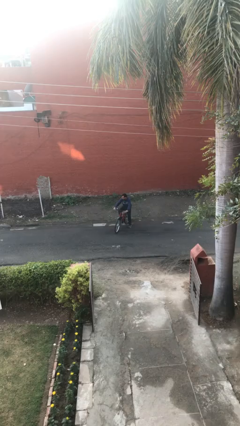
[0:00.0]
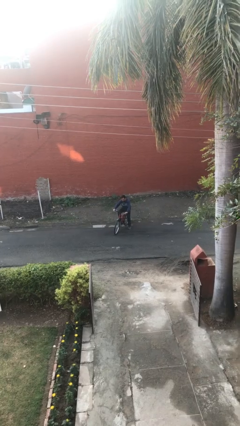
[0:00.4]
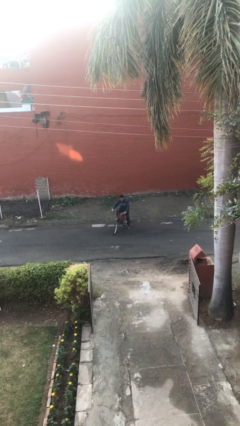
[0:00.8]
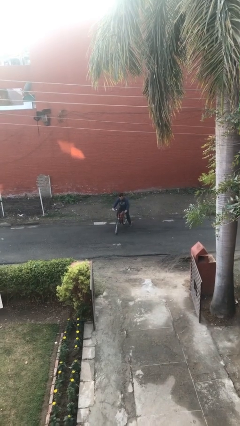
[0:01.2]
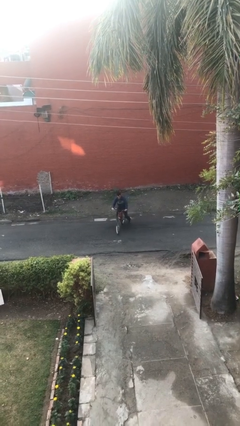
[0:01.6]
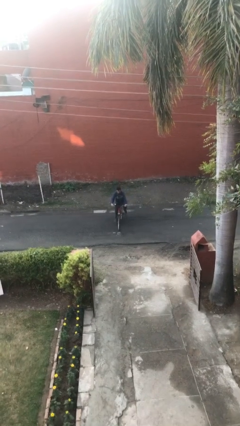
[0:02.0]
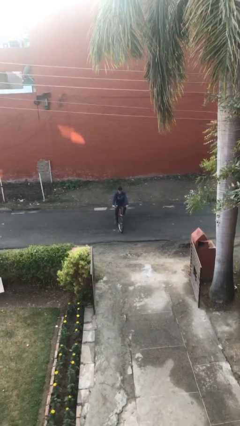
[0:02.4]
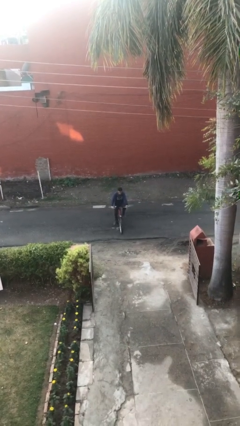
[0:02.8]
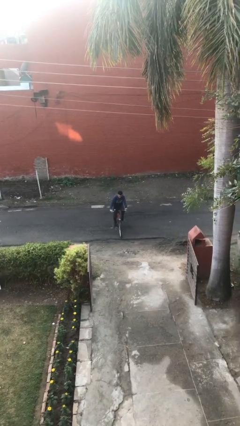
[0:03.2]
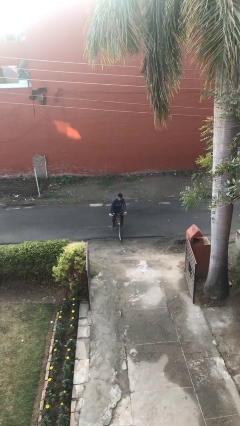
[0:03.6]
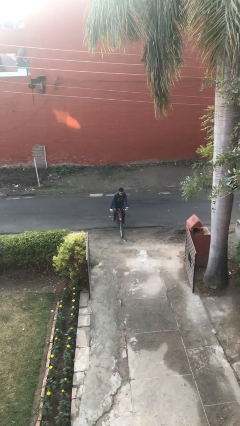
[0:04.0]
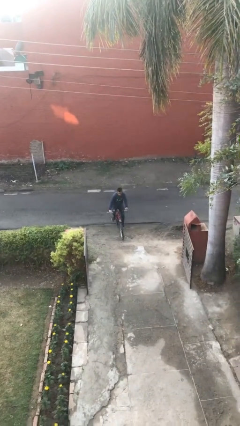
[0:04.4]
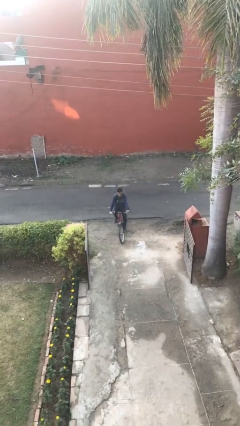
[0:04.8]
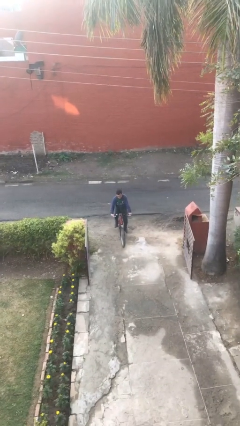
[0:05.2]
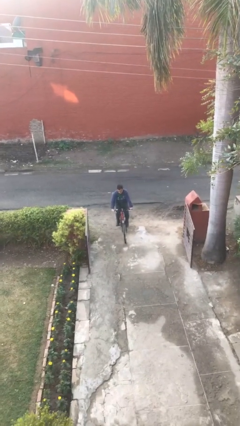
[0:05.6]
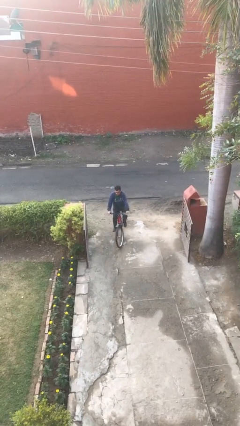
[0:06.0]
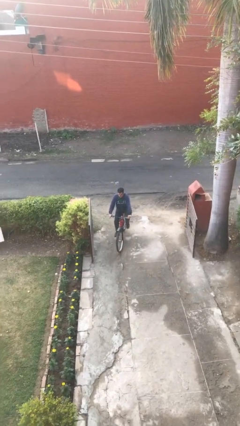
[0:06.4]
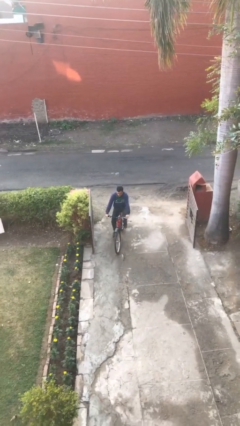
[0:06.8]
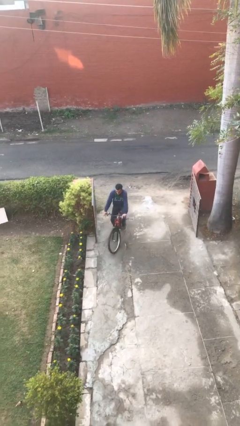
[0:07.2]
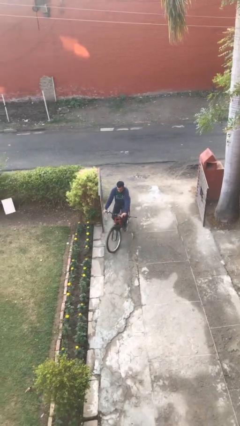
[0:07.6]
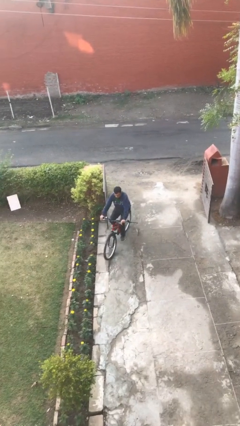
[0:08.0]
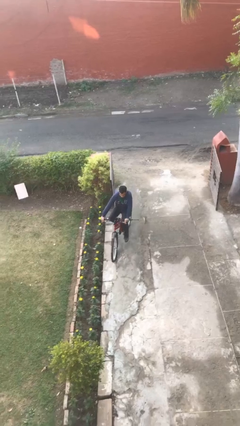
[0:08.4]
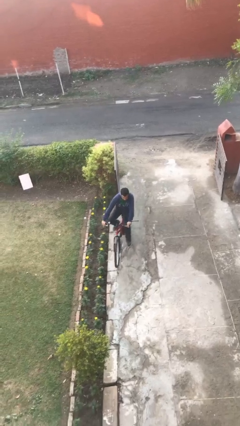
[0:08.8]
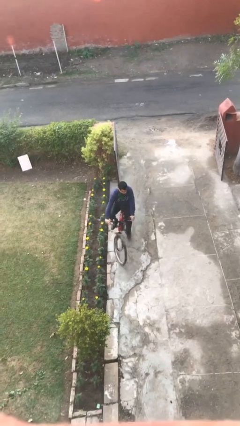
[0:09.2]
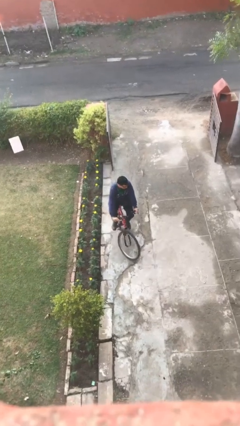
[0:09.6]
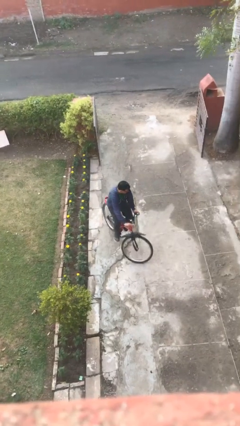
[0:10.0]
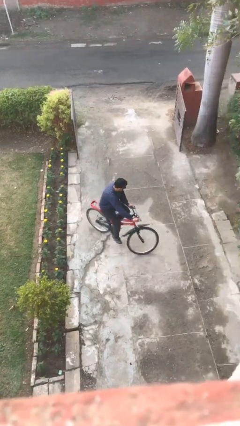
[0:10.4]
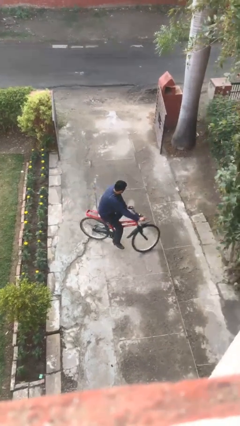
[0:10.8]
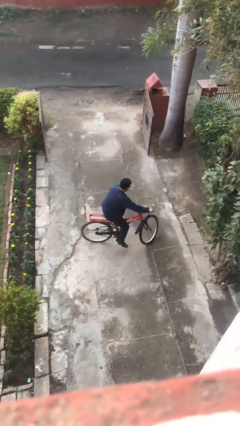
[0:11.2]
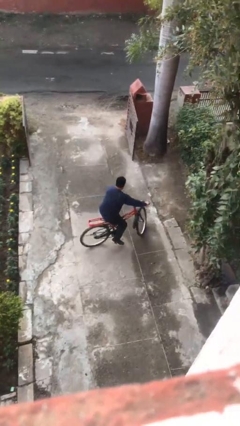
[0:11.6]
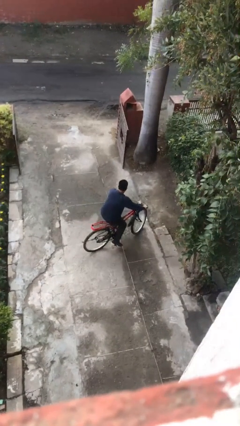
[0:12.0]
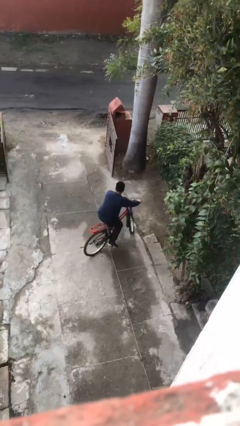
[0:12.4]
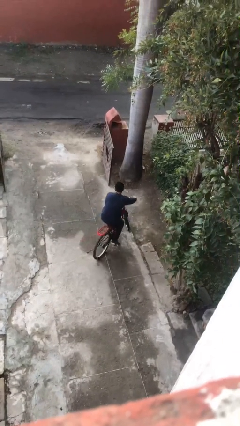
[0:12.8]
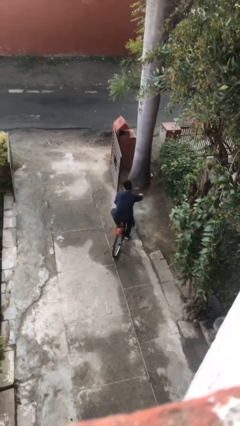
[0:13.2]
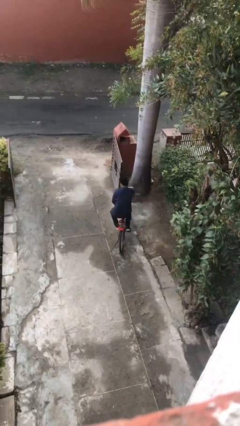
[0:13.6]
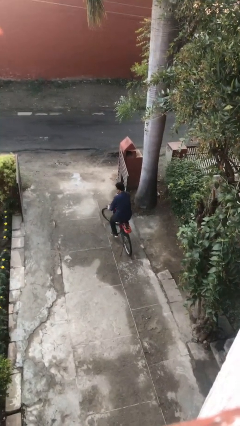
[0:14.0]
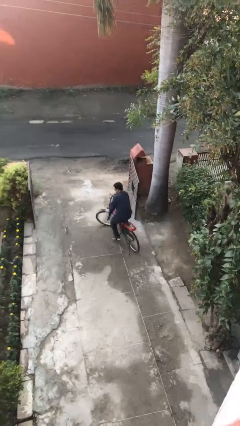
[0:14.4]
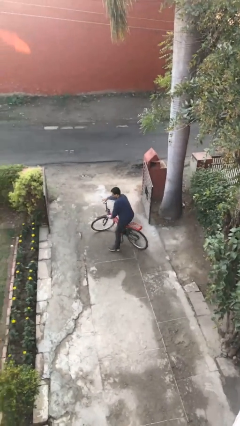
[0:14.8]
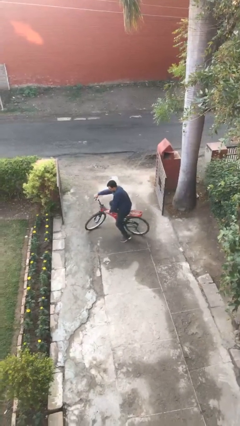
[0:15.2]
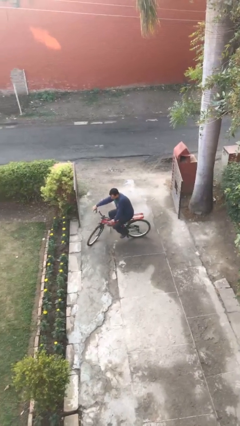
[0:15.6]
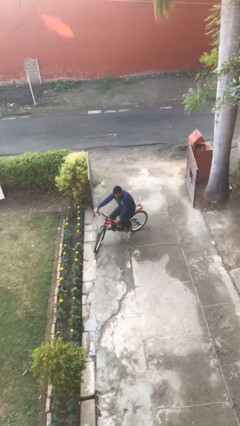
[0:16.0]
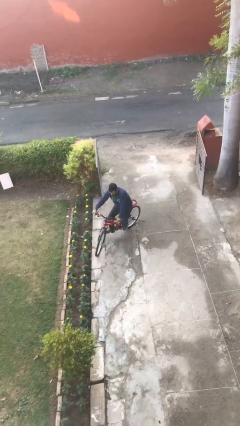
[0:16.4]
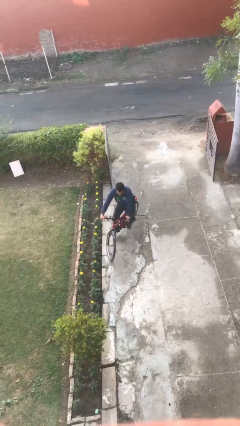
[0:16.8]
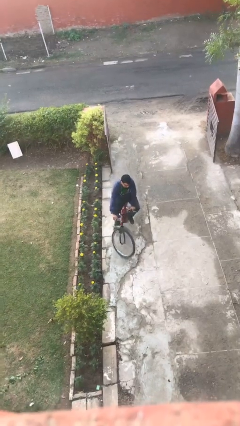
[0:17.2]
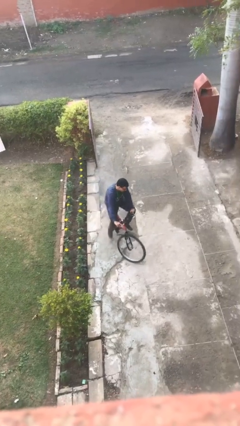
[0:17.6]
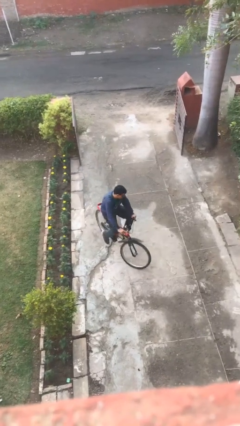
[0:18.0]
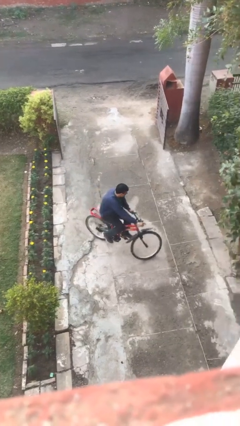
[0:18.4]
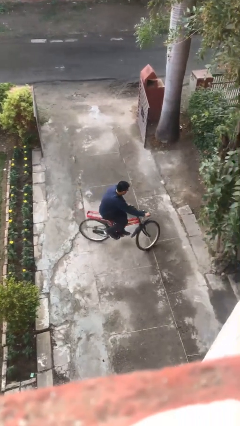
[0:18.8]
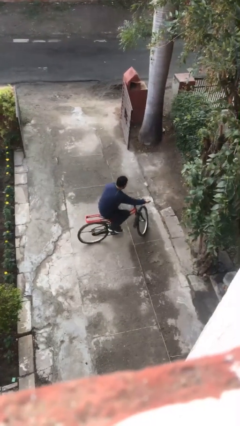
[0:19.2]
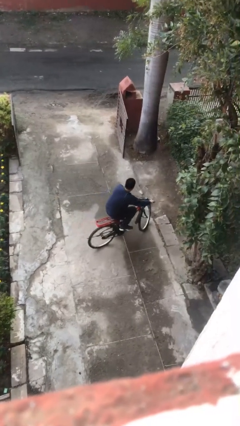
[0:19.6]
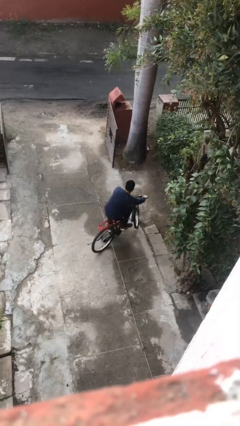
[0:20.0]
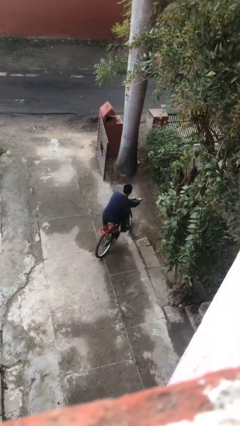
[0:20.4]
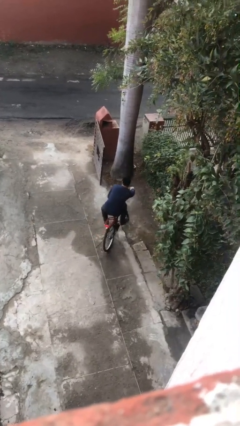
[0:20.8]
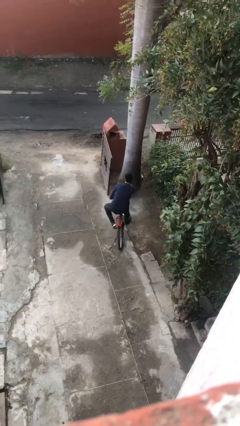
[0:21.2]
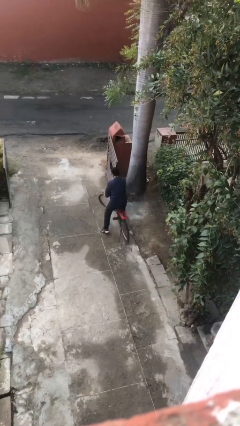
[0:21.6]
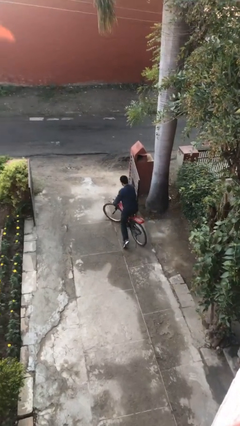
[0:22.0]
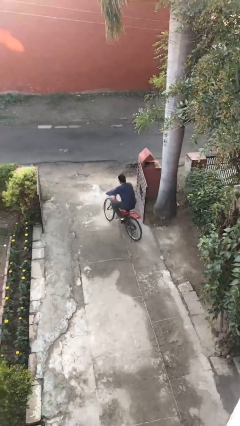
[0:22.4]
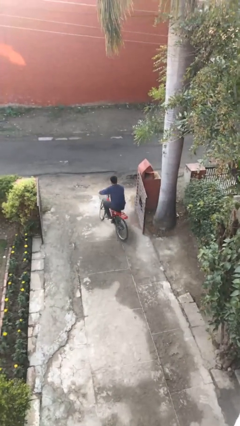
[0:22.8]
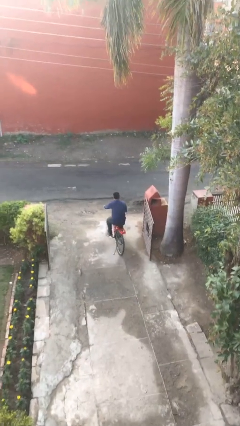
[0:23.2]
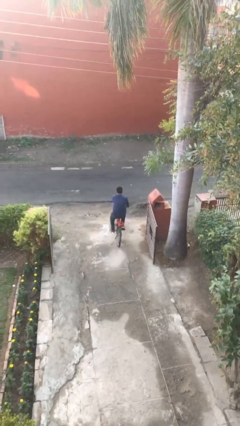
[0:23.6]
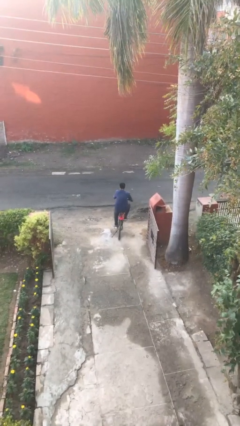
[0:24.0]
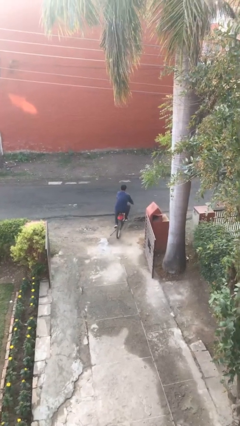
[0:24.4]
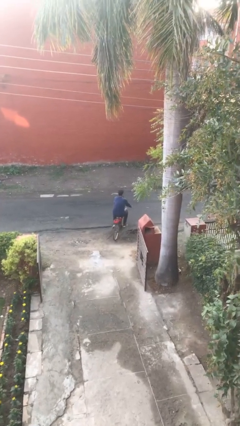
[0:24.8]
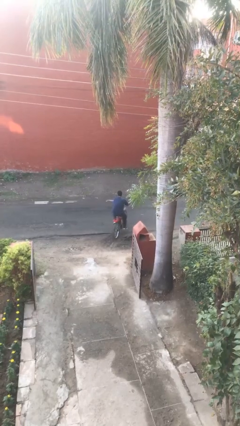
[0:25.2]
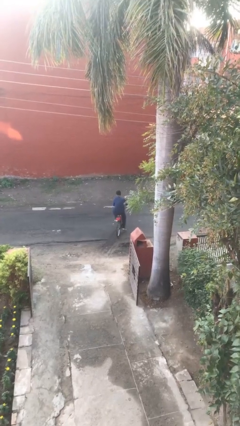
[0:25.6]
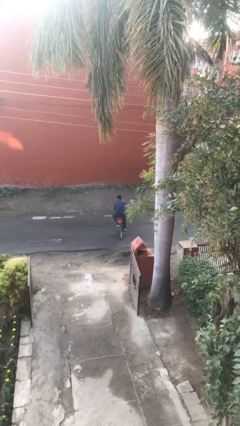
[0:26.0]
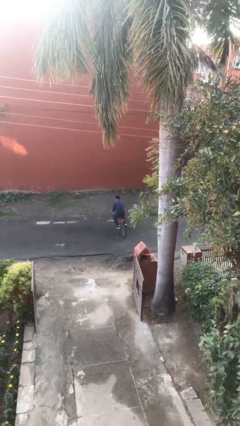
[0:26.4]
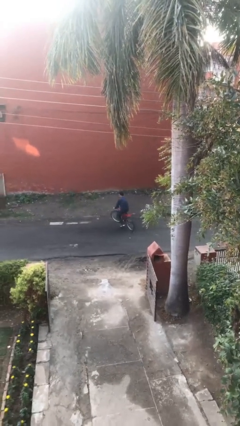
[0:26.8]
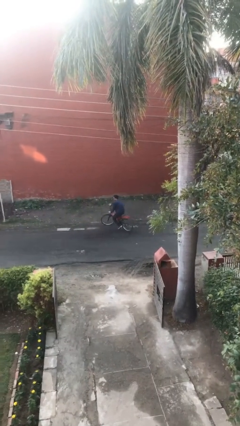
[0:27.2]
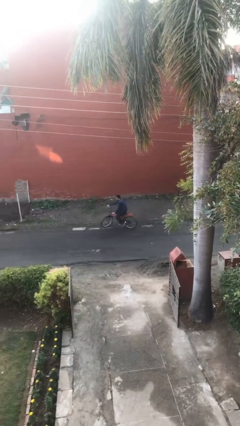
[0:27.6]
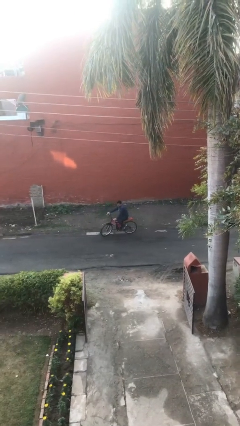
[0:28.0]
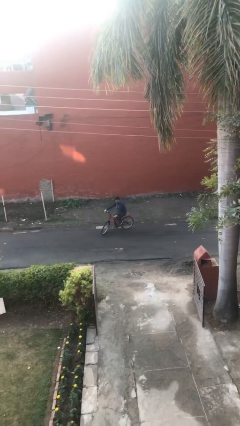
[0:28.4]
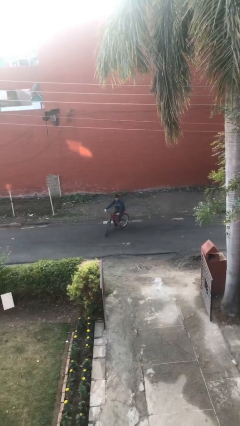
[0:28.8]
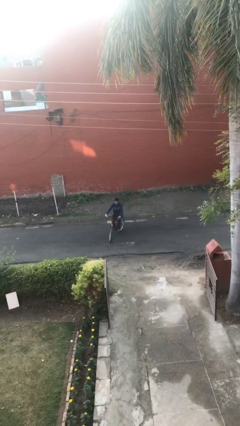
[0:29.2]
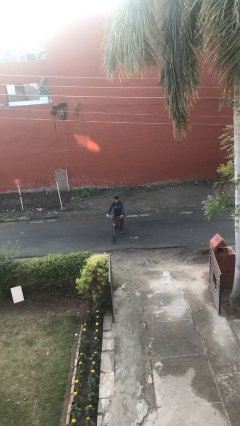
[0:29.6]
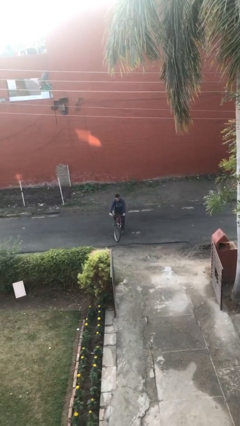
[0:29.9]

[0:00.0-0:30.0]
person rides bicycle

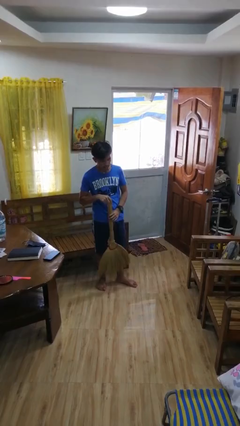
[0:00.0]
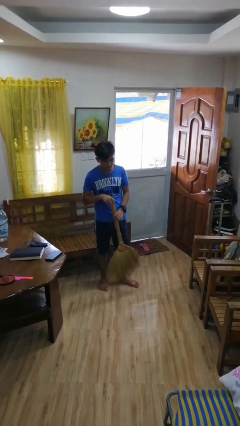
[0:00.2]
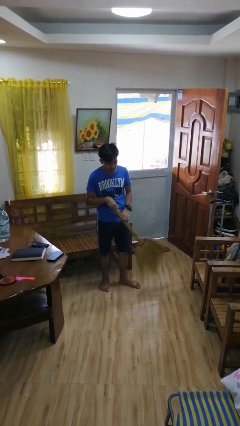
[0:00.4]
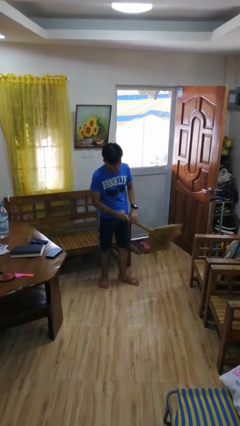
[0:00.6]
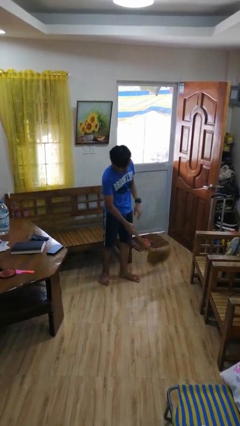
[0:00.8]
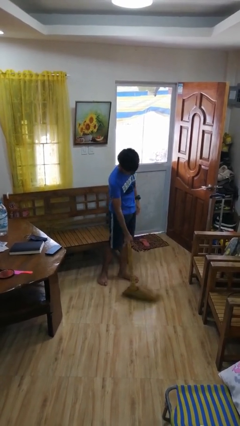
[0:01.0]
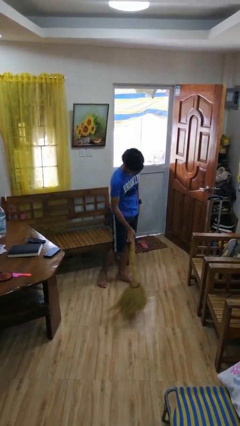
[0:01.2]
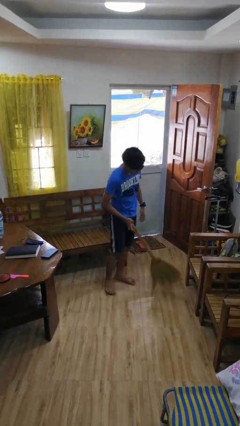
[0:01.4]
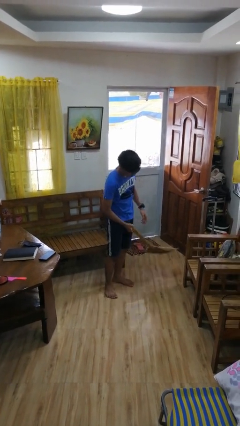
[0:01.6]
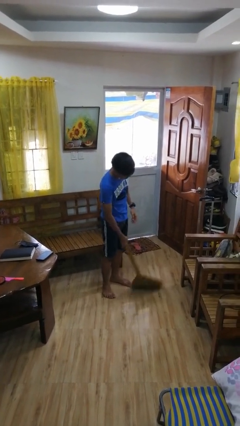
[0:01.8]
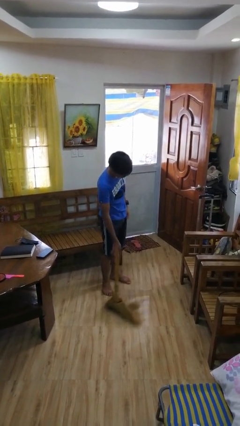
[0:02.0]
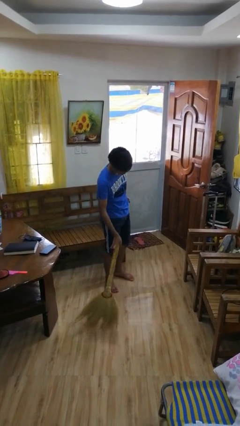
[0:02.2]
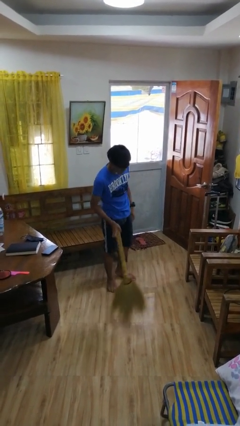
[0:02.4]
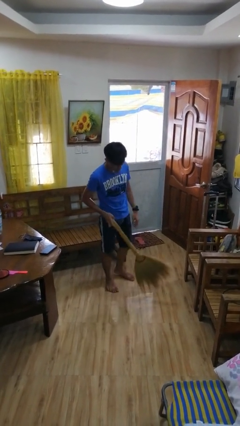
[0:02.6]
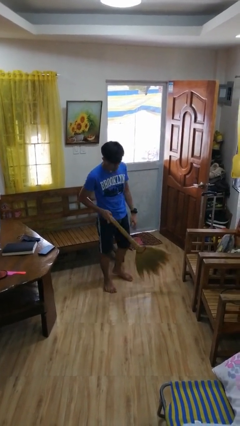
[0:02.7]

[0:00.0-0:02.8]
person sweeps floor
